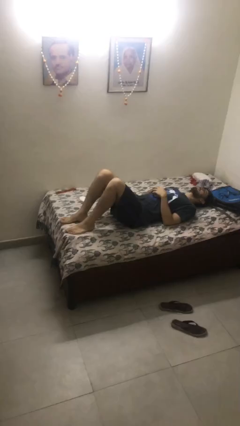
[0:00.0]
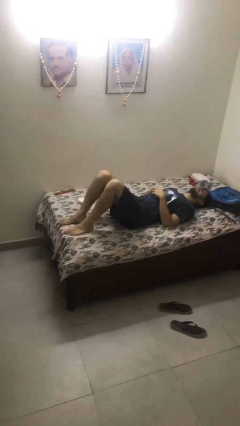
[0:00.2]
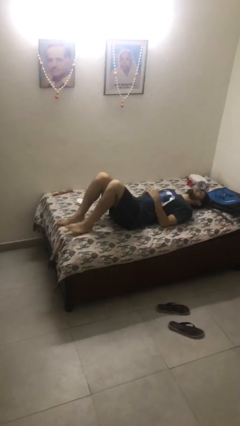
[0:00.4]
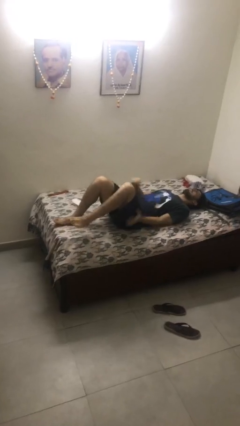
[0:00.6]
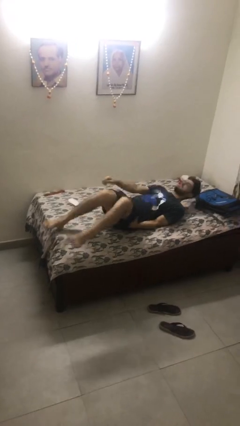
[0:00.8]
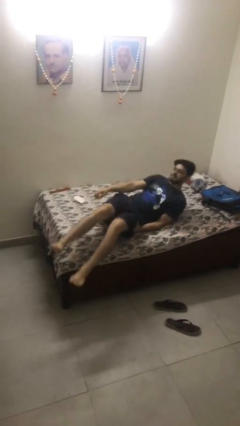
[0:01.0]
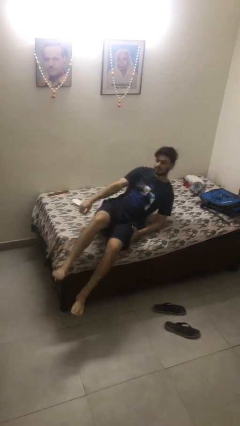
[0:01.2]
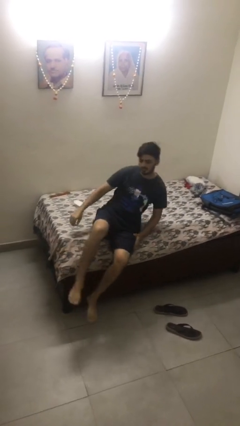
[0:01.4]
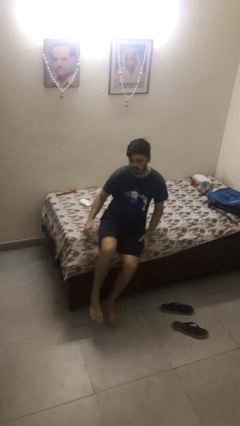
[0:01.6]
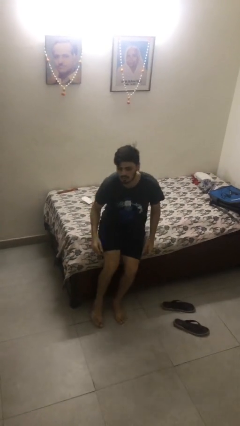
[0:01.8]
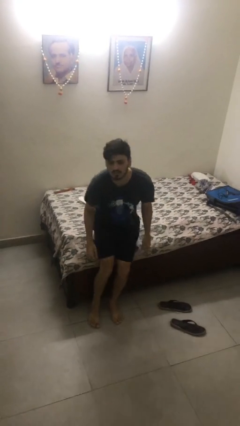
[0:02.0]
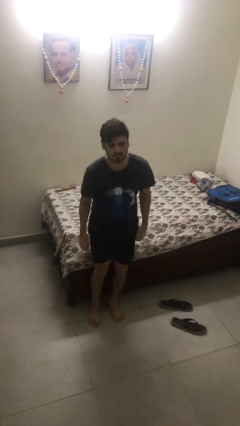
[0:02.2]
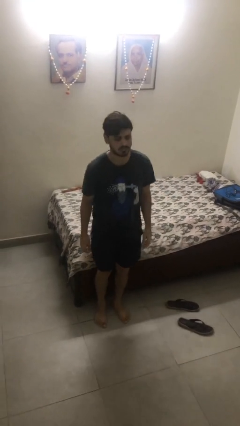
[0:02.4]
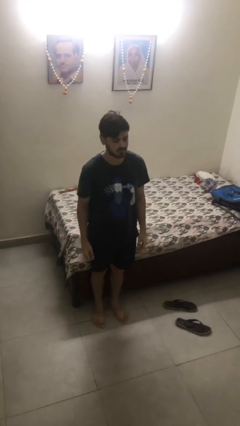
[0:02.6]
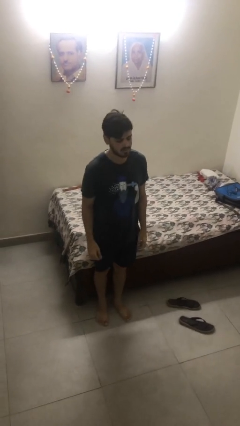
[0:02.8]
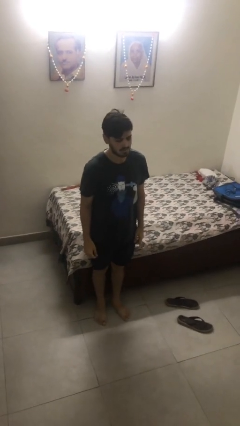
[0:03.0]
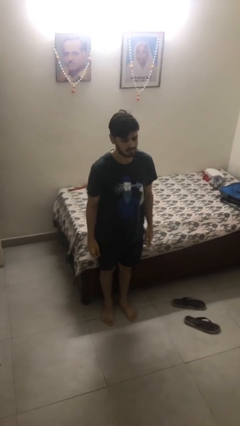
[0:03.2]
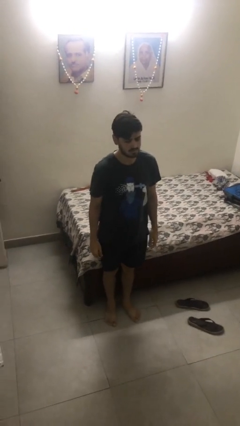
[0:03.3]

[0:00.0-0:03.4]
person stands up

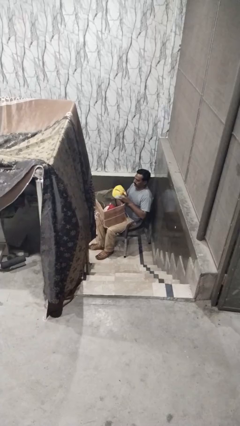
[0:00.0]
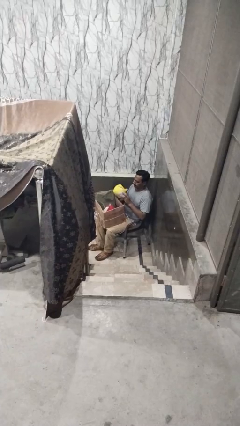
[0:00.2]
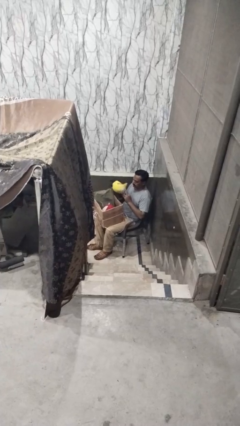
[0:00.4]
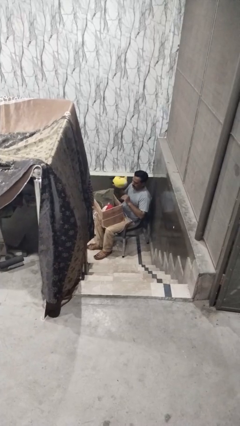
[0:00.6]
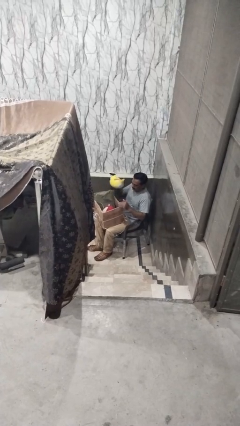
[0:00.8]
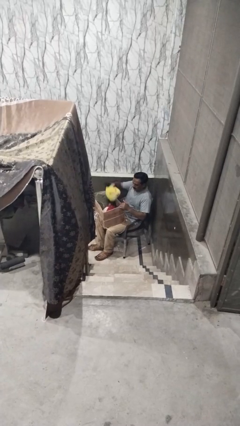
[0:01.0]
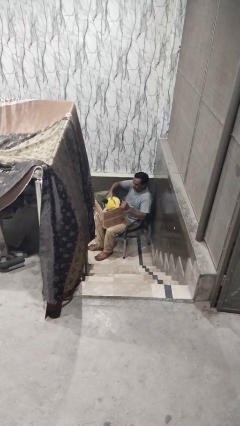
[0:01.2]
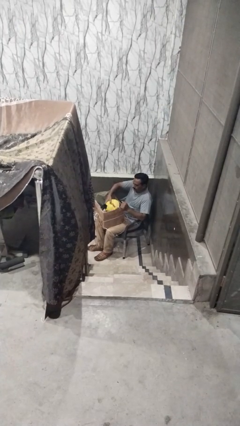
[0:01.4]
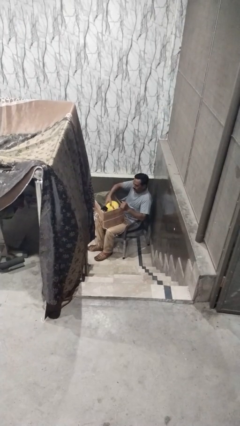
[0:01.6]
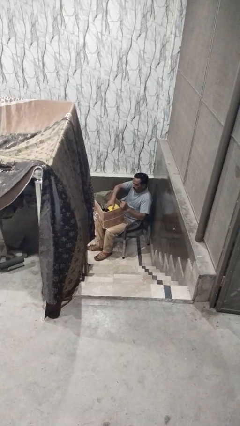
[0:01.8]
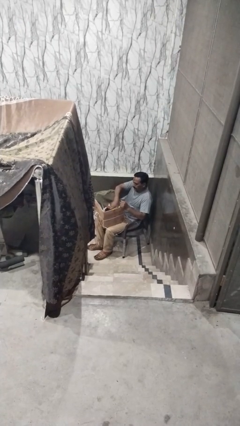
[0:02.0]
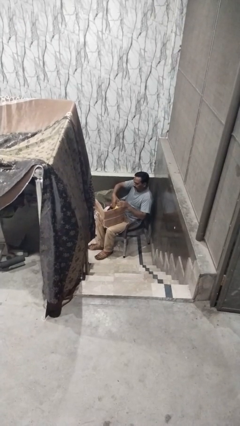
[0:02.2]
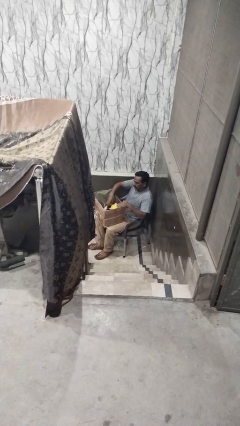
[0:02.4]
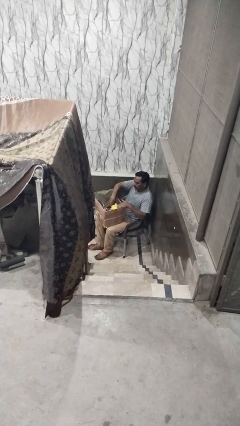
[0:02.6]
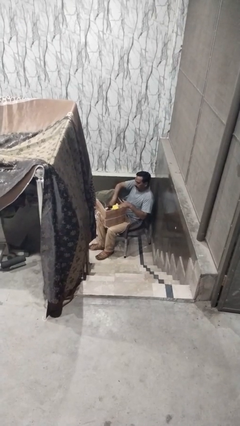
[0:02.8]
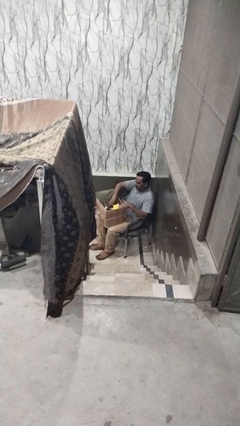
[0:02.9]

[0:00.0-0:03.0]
person puts object into box

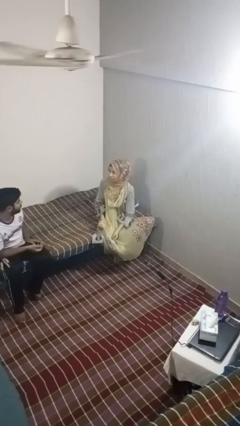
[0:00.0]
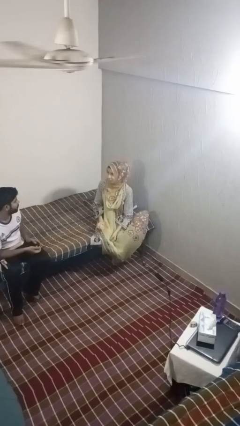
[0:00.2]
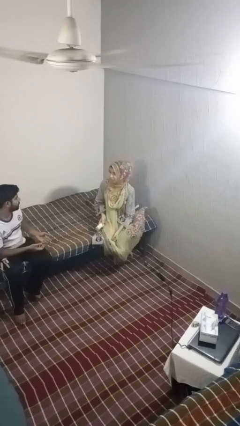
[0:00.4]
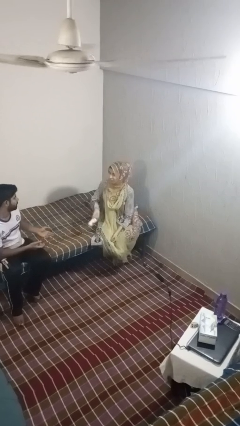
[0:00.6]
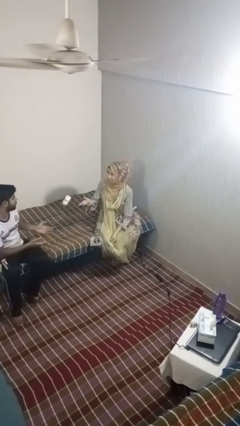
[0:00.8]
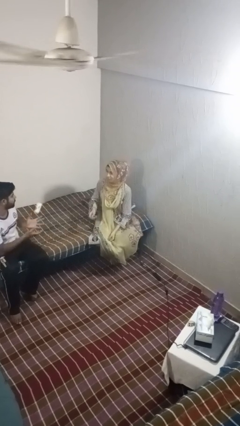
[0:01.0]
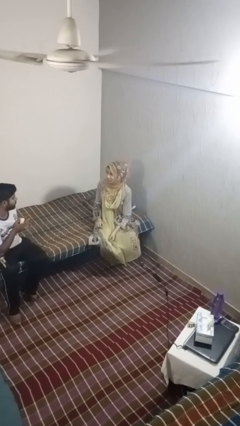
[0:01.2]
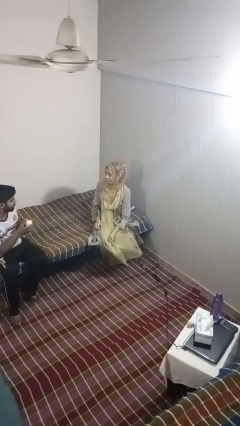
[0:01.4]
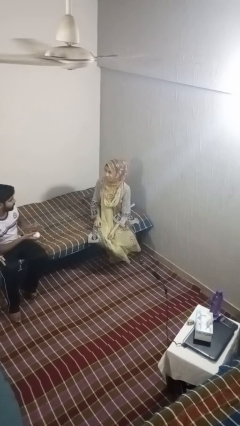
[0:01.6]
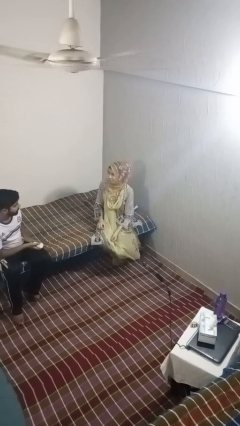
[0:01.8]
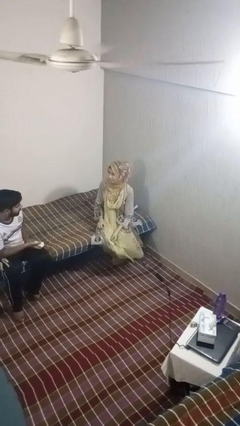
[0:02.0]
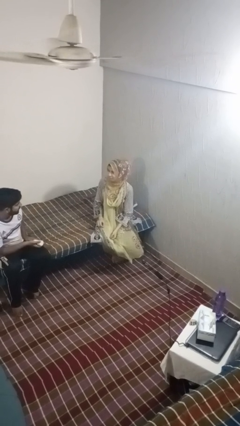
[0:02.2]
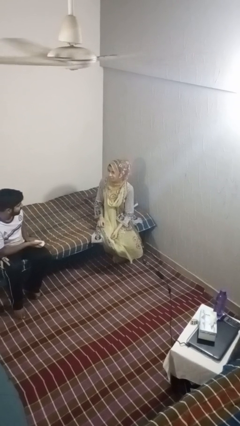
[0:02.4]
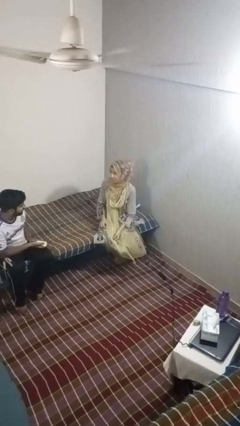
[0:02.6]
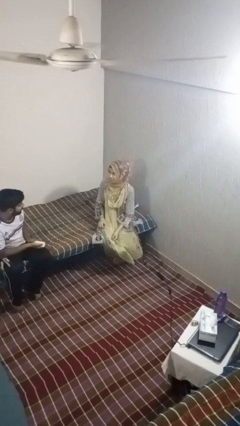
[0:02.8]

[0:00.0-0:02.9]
person throws object to person

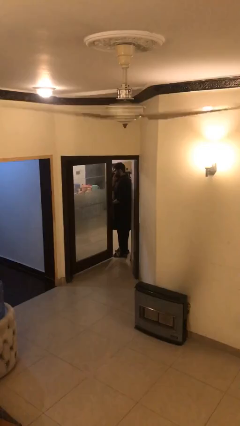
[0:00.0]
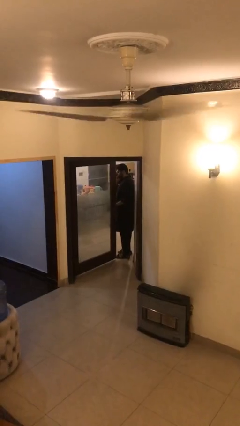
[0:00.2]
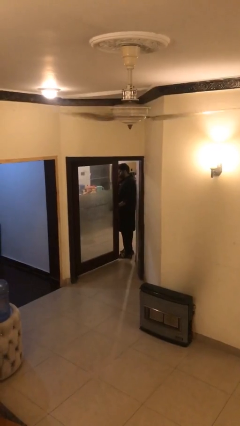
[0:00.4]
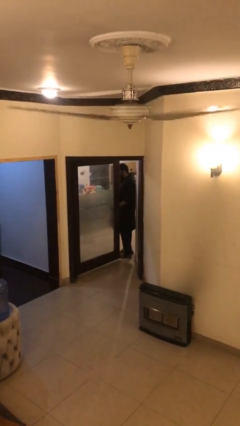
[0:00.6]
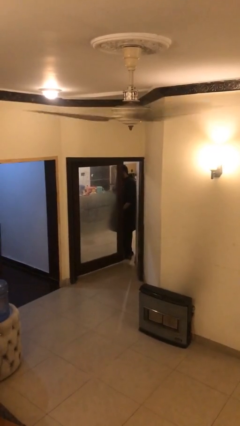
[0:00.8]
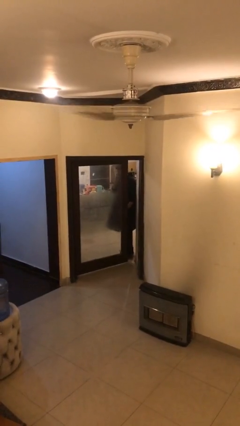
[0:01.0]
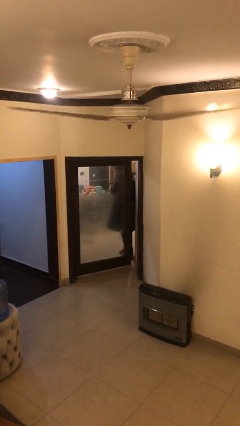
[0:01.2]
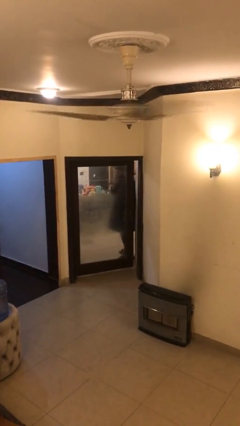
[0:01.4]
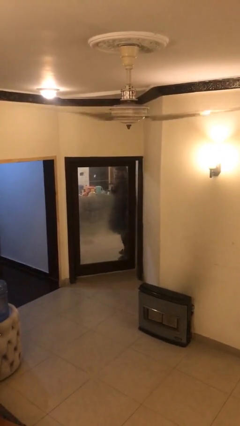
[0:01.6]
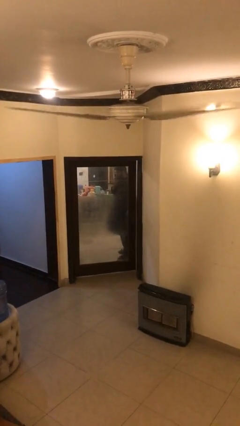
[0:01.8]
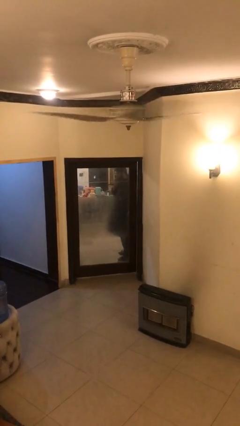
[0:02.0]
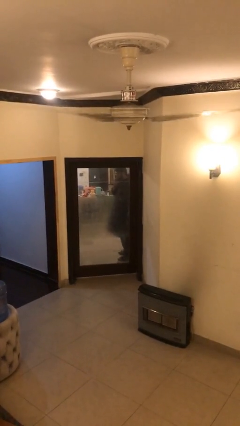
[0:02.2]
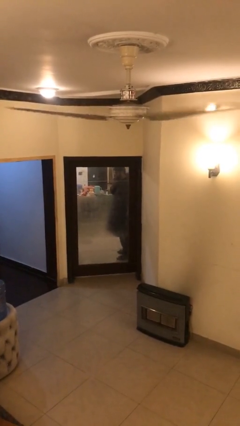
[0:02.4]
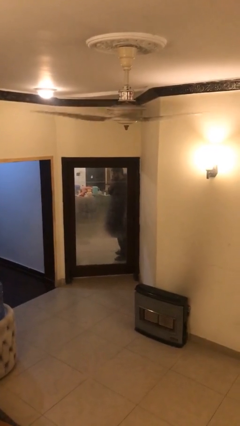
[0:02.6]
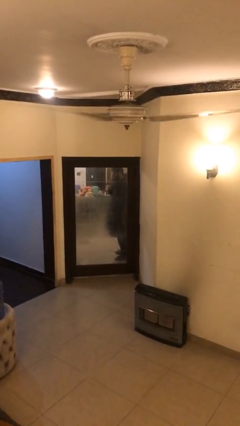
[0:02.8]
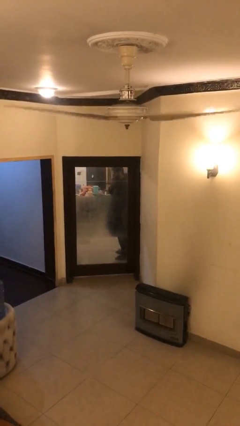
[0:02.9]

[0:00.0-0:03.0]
person closes facility door

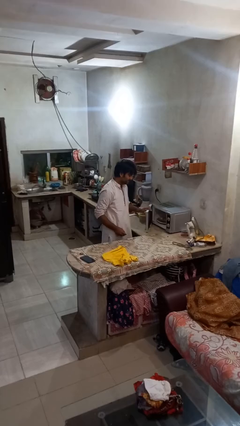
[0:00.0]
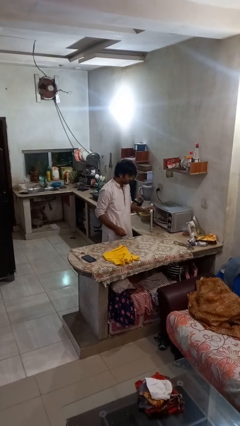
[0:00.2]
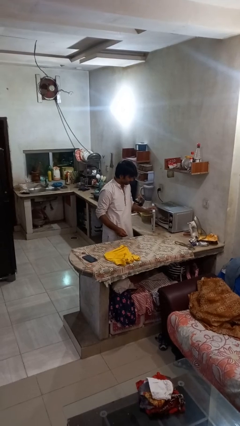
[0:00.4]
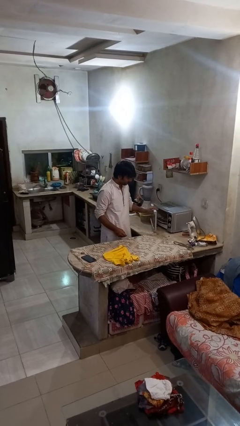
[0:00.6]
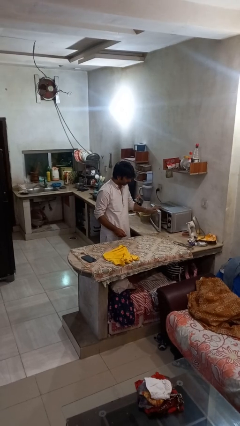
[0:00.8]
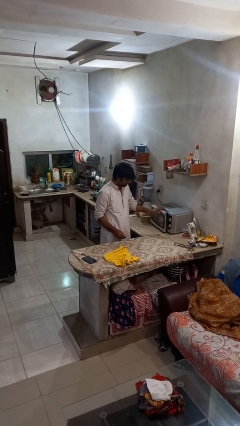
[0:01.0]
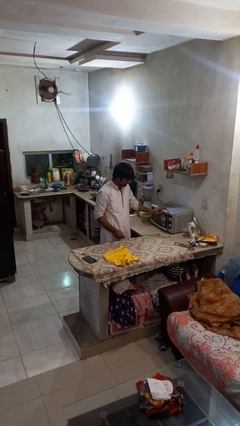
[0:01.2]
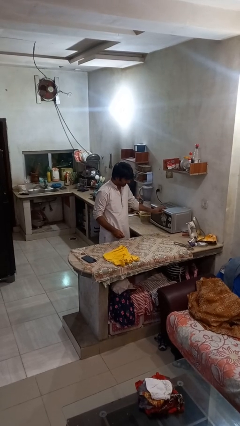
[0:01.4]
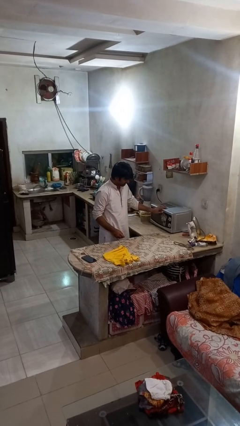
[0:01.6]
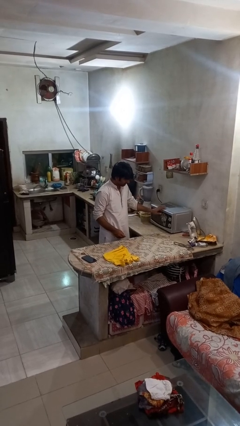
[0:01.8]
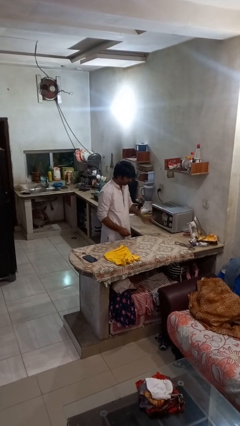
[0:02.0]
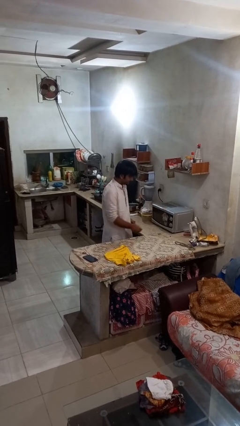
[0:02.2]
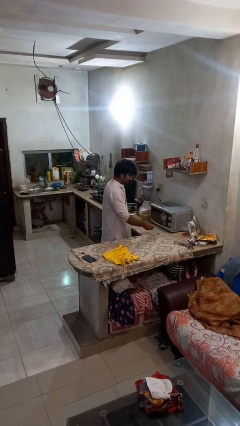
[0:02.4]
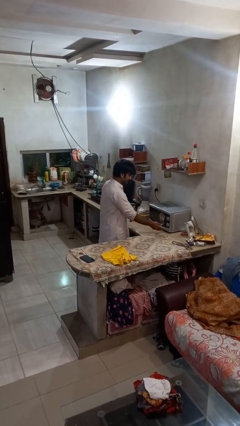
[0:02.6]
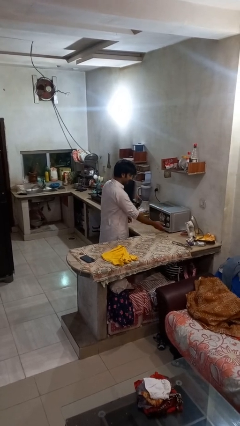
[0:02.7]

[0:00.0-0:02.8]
person closes microwave

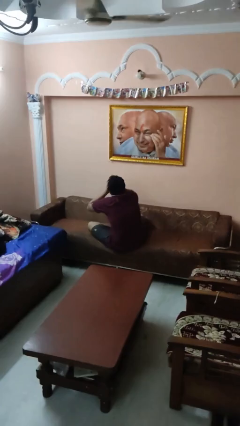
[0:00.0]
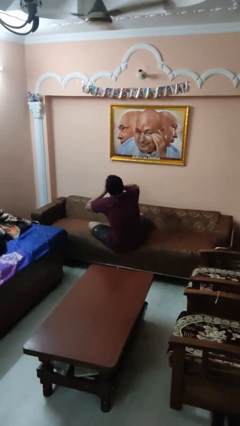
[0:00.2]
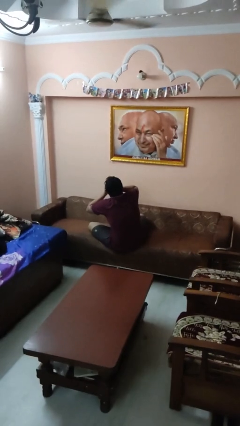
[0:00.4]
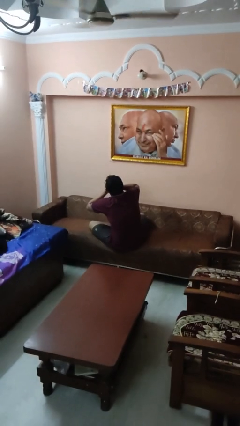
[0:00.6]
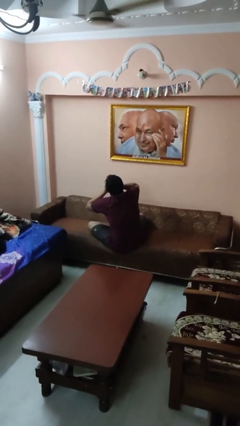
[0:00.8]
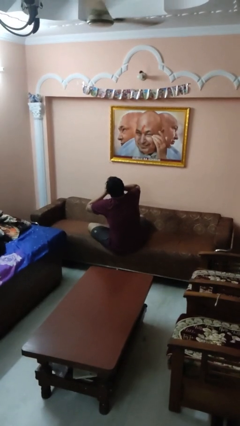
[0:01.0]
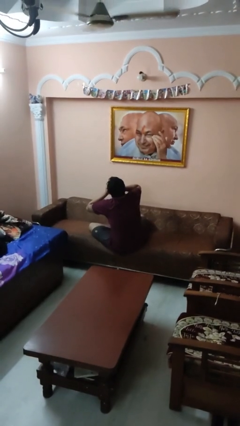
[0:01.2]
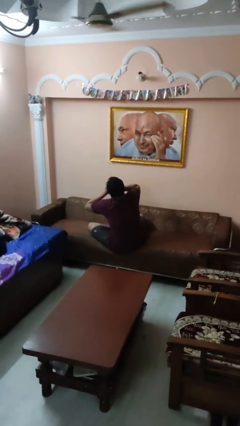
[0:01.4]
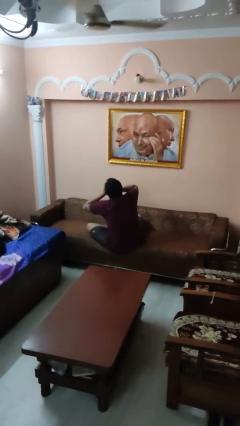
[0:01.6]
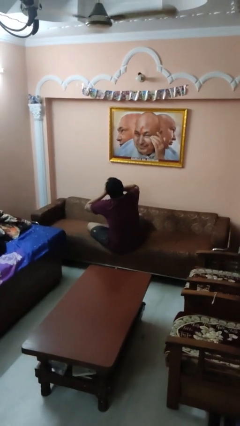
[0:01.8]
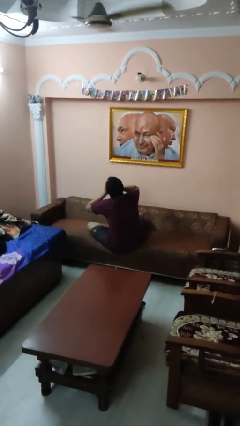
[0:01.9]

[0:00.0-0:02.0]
person covers face with hands

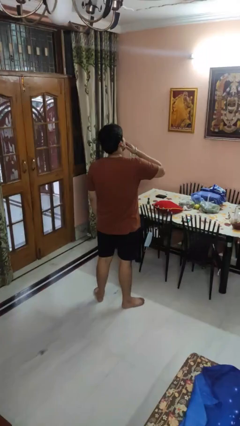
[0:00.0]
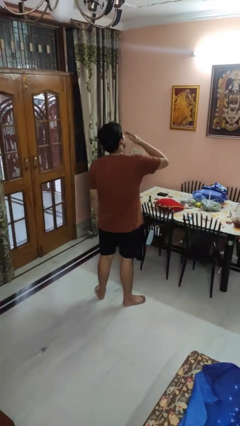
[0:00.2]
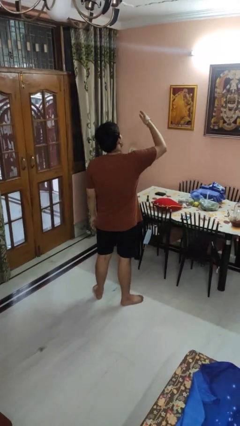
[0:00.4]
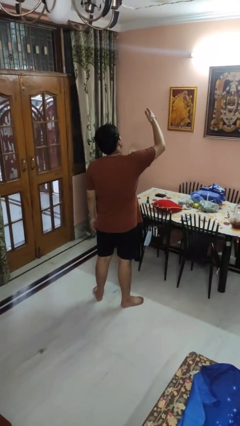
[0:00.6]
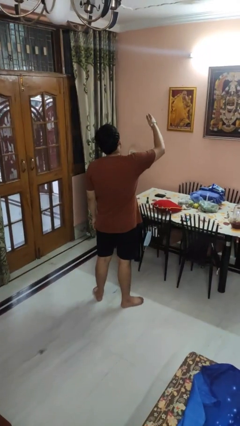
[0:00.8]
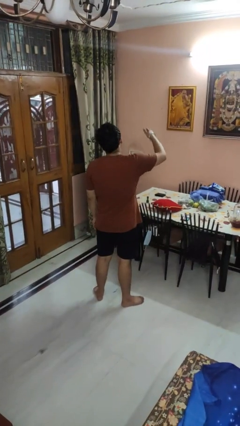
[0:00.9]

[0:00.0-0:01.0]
person gestures blow kiss
